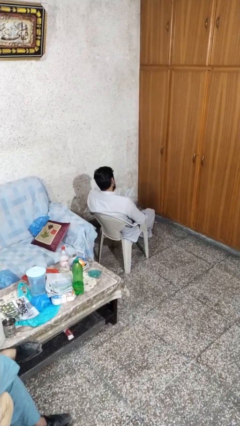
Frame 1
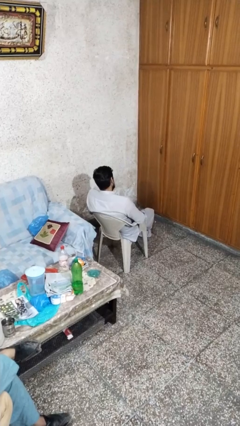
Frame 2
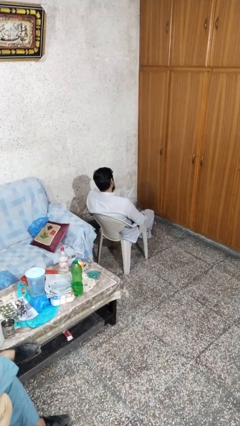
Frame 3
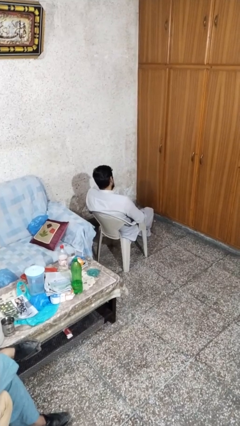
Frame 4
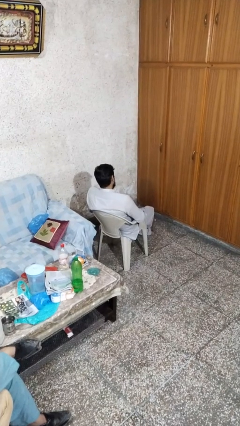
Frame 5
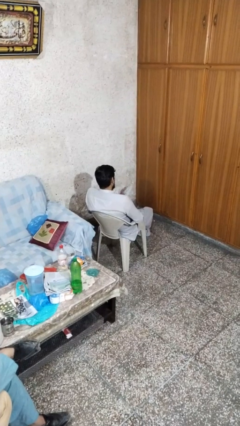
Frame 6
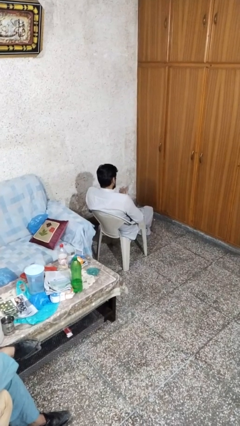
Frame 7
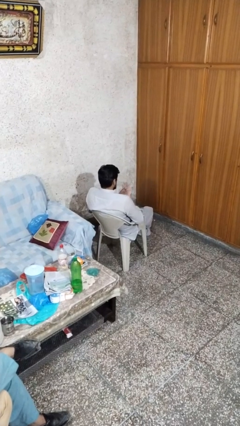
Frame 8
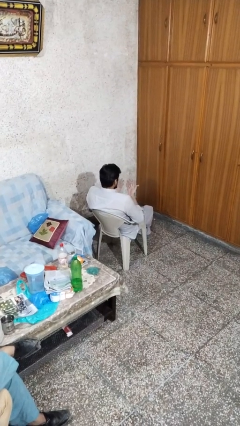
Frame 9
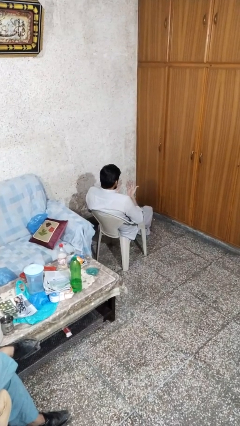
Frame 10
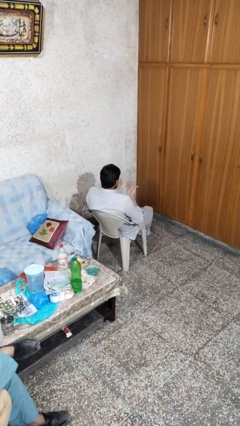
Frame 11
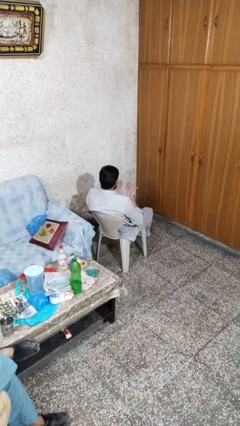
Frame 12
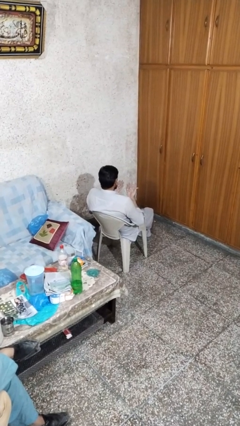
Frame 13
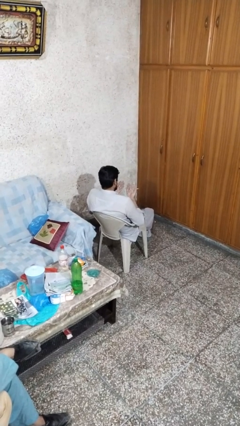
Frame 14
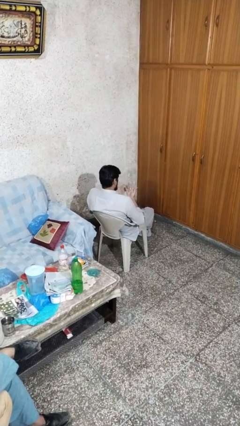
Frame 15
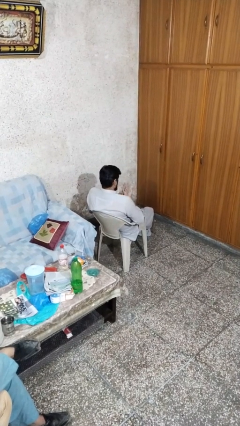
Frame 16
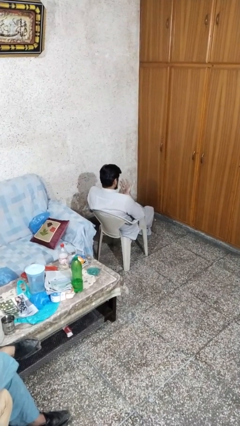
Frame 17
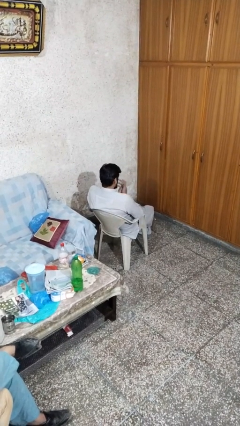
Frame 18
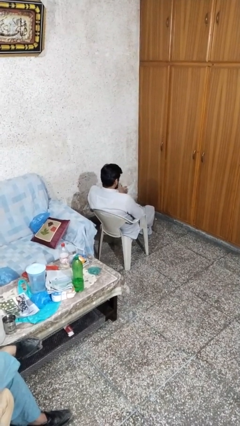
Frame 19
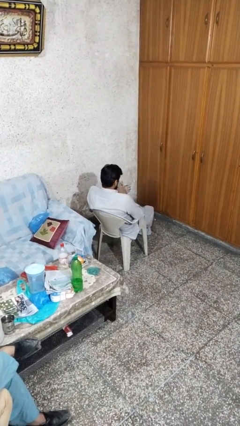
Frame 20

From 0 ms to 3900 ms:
person looks at hands in lap

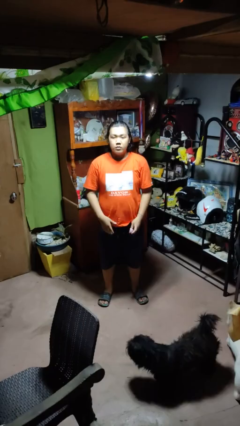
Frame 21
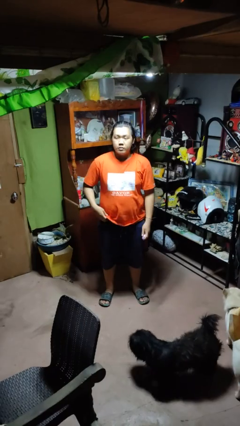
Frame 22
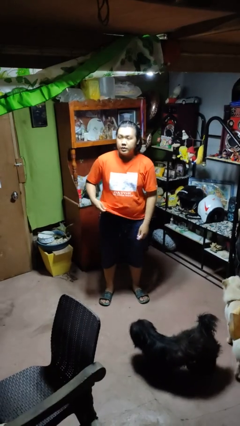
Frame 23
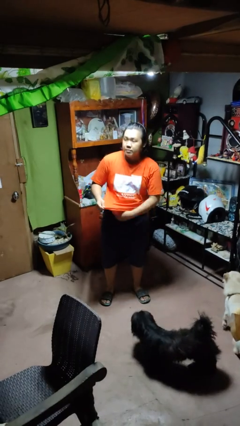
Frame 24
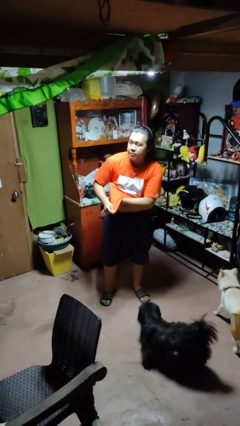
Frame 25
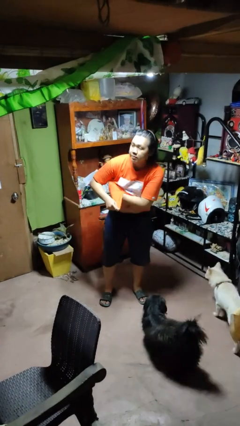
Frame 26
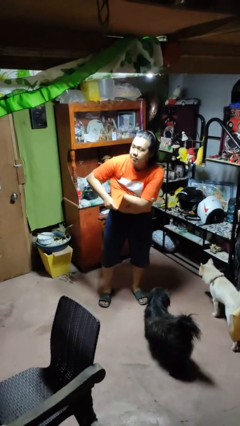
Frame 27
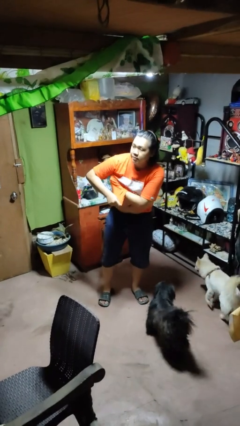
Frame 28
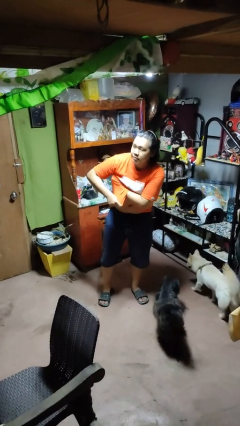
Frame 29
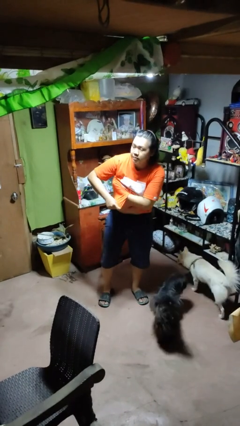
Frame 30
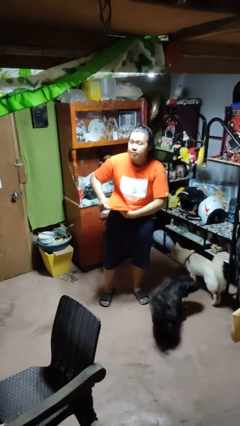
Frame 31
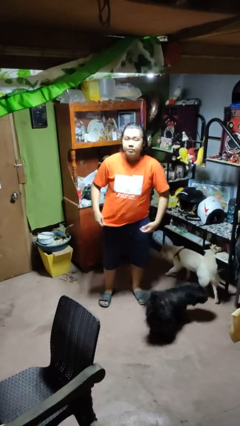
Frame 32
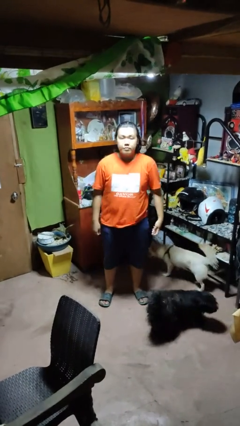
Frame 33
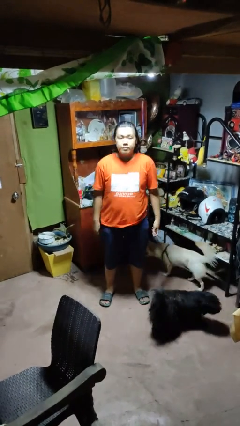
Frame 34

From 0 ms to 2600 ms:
person applies deodorant

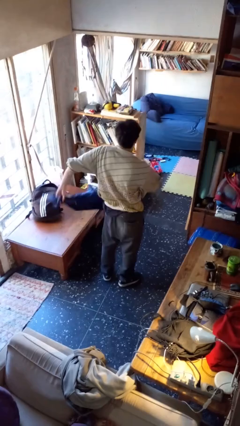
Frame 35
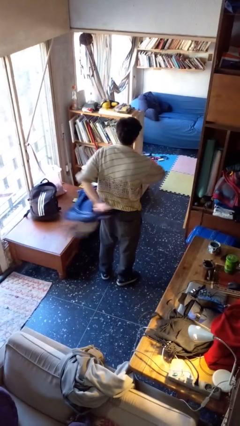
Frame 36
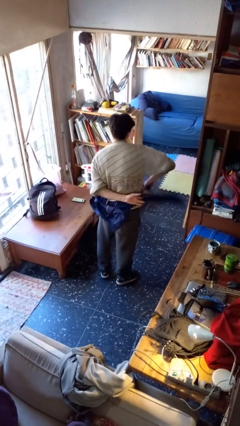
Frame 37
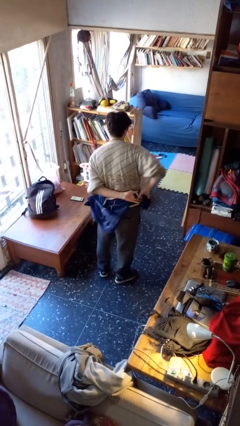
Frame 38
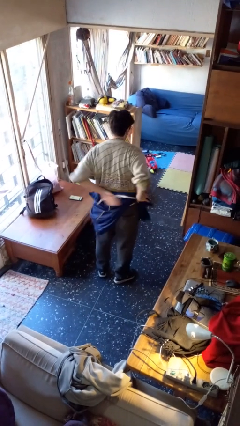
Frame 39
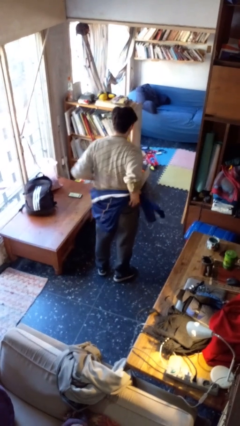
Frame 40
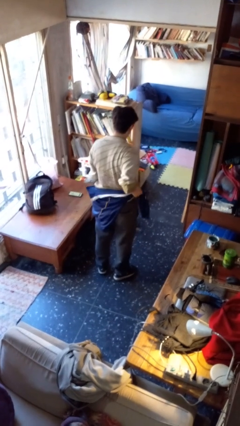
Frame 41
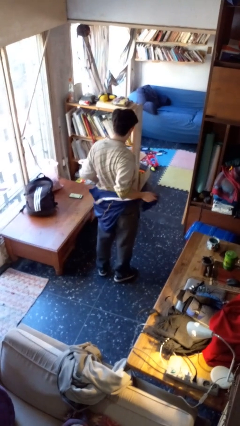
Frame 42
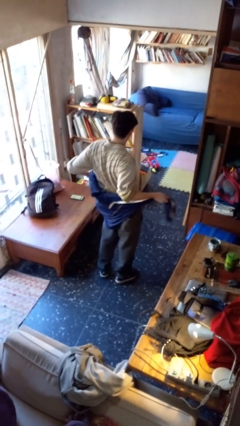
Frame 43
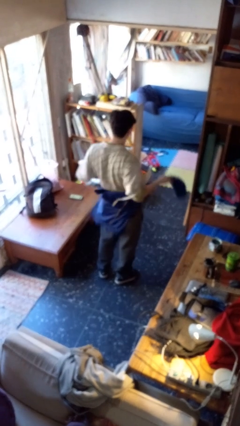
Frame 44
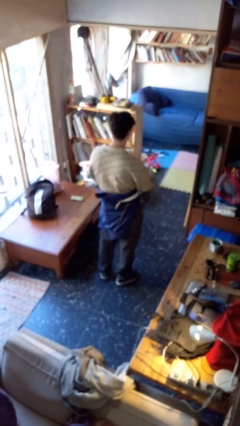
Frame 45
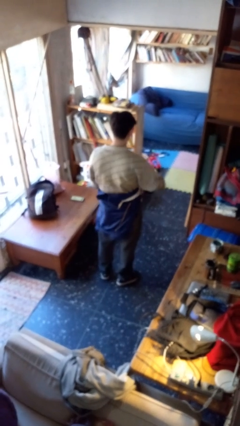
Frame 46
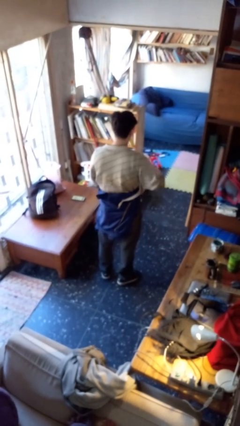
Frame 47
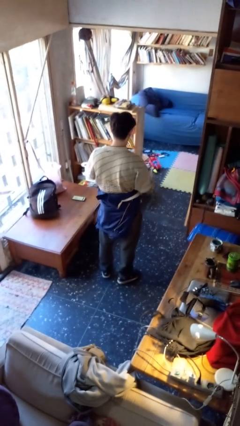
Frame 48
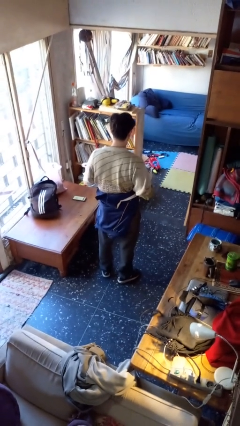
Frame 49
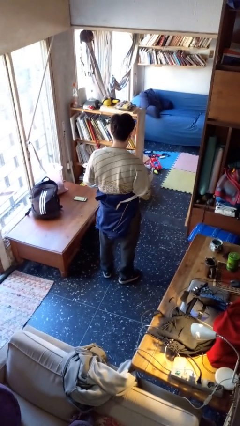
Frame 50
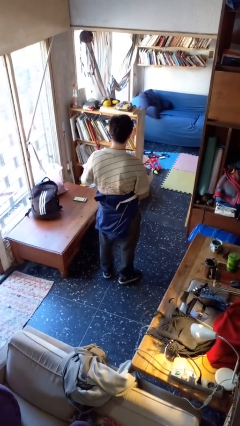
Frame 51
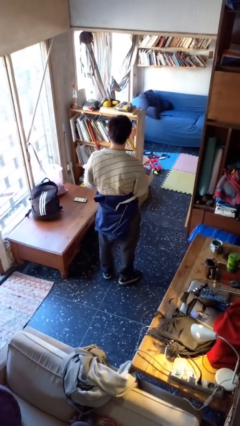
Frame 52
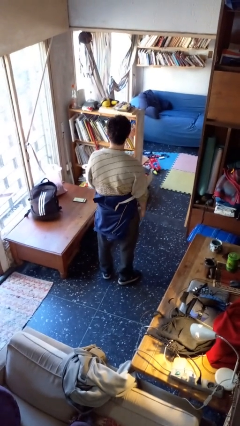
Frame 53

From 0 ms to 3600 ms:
person ties jacket around waist

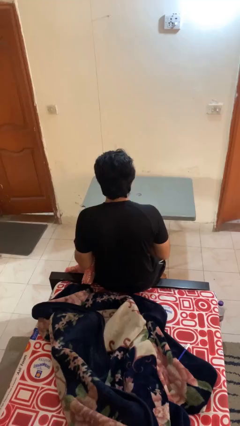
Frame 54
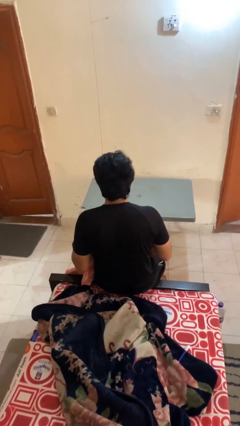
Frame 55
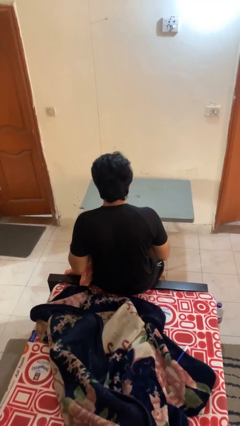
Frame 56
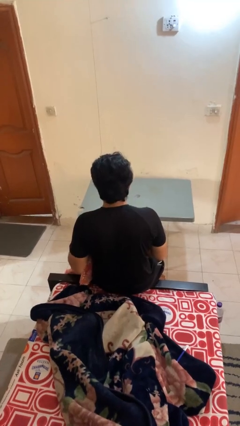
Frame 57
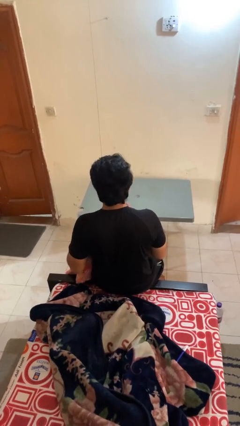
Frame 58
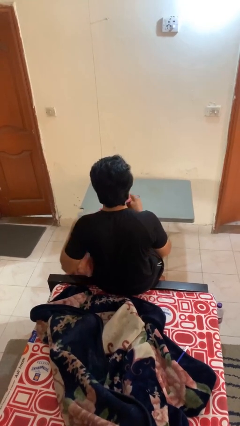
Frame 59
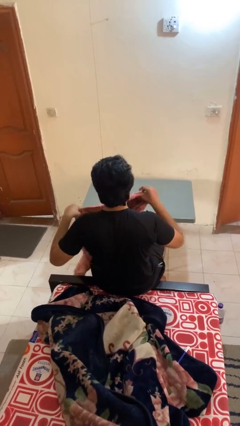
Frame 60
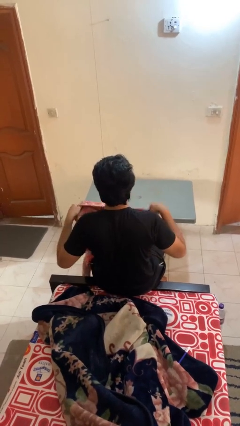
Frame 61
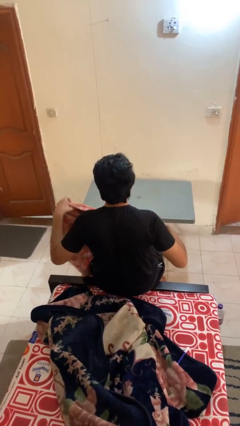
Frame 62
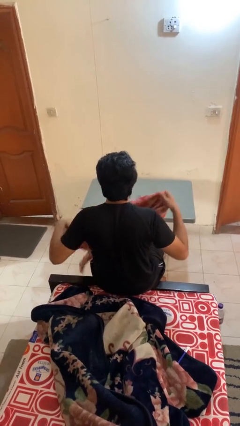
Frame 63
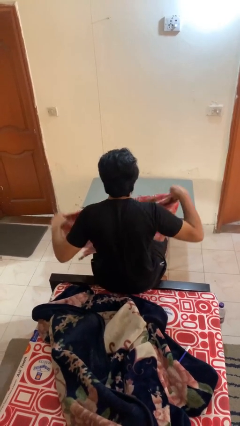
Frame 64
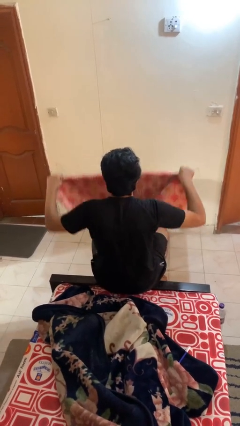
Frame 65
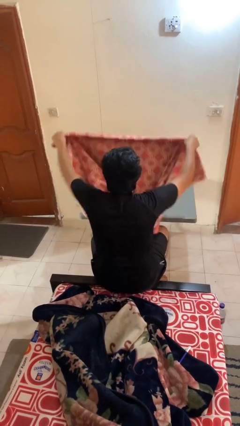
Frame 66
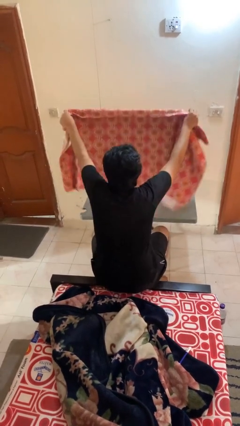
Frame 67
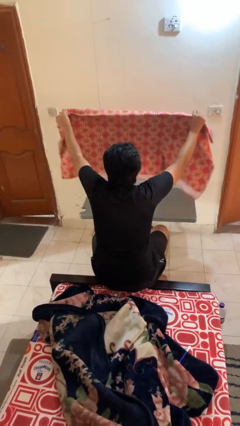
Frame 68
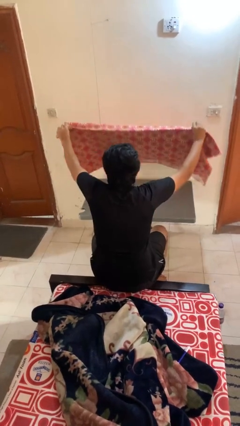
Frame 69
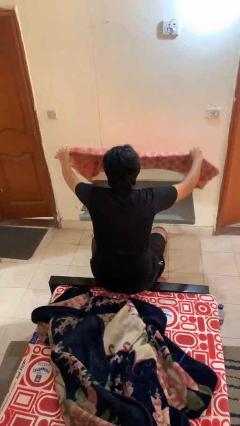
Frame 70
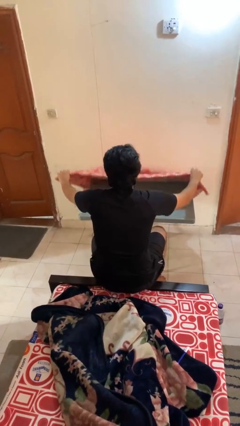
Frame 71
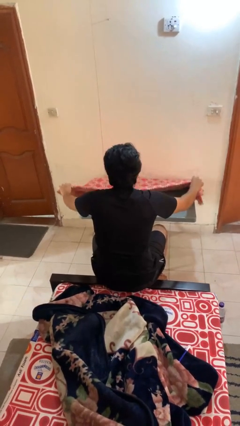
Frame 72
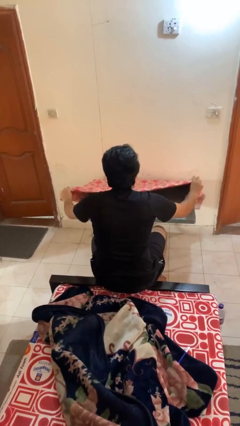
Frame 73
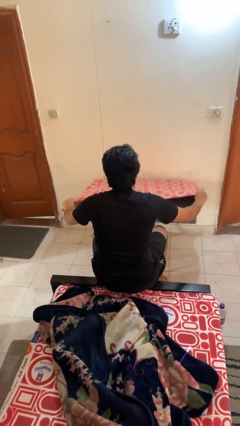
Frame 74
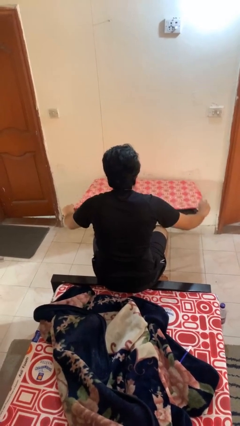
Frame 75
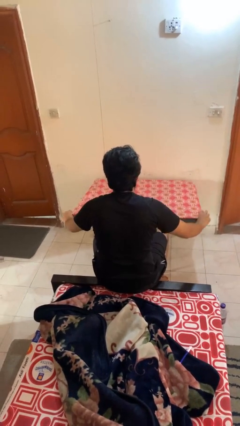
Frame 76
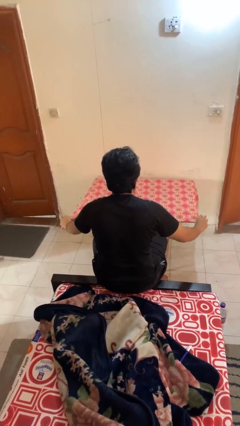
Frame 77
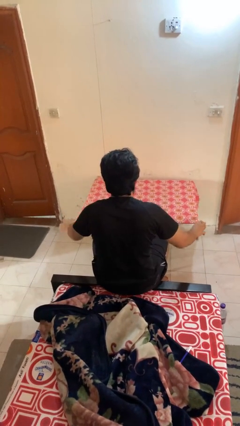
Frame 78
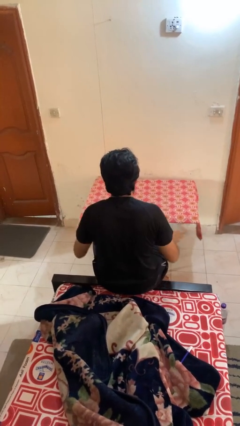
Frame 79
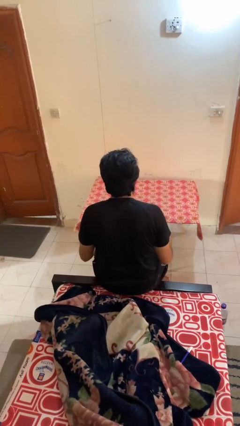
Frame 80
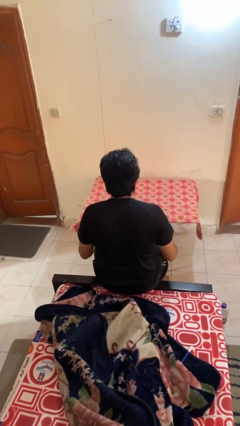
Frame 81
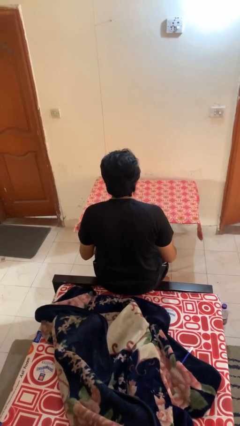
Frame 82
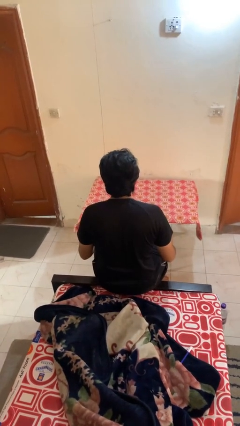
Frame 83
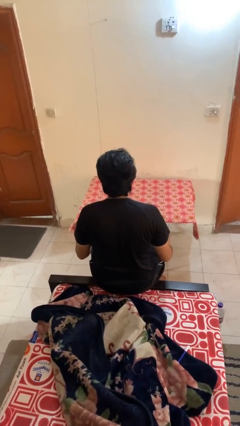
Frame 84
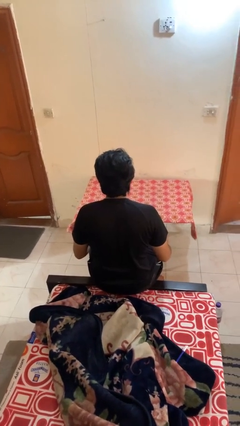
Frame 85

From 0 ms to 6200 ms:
person spreads tablecloth

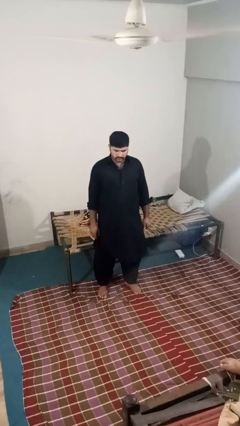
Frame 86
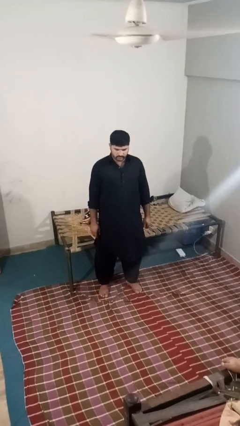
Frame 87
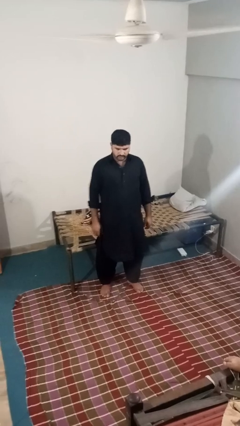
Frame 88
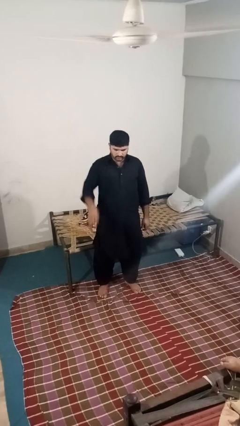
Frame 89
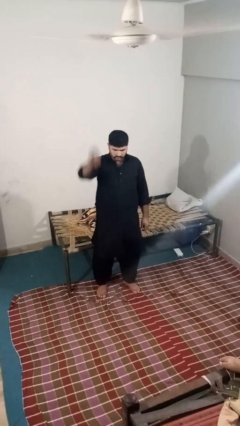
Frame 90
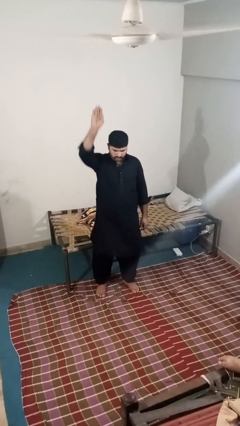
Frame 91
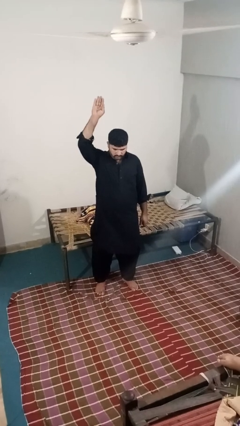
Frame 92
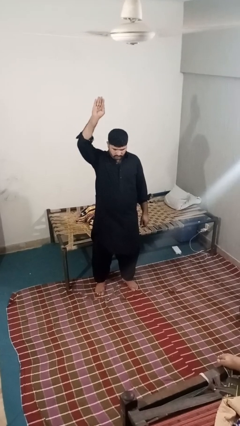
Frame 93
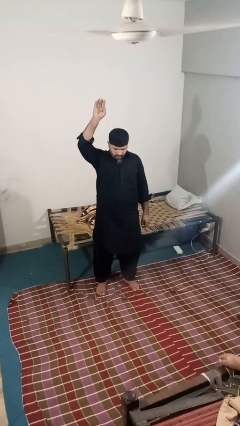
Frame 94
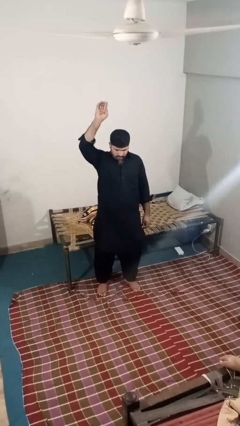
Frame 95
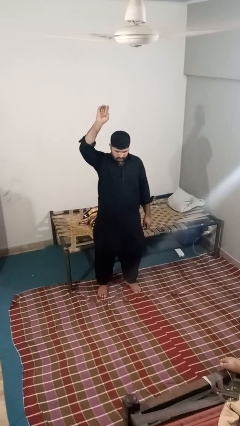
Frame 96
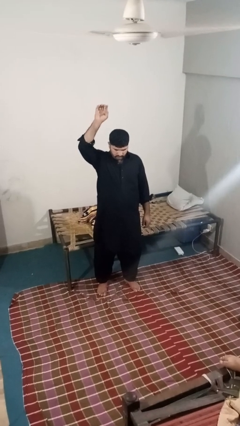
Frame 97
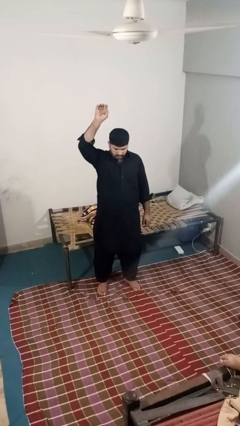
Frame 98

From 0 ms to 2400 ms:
person gestures swipe up
